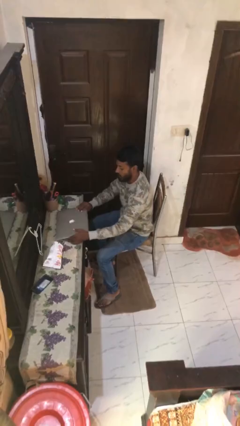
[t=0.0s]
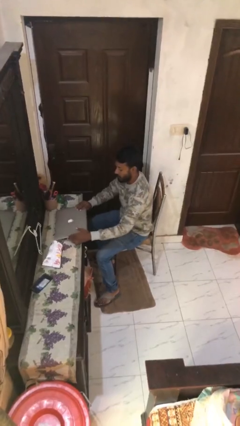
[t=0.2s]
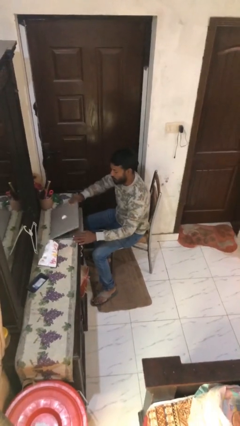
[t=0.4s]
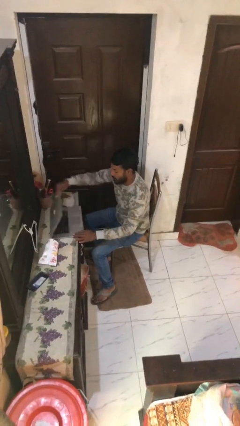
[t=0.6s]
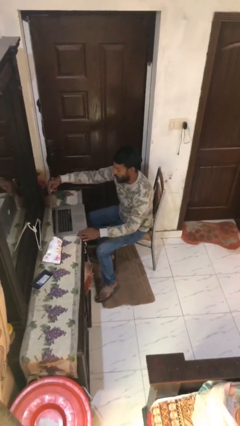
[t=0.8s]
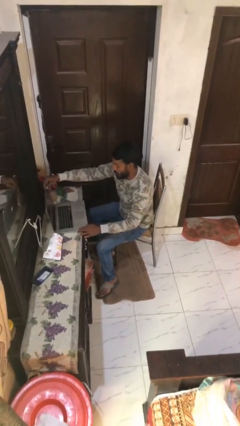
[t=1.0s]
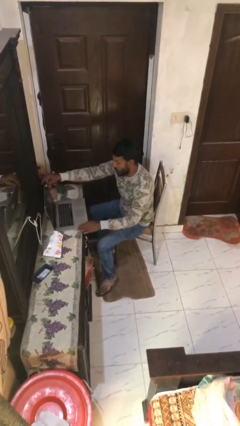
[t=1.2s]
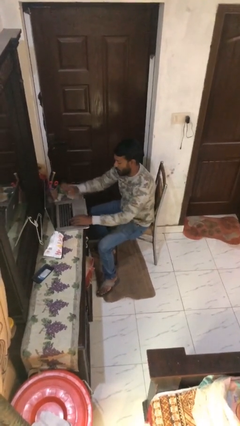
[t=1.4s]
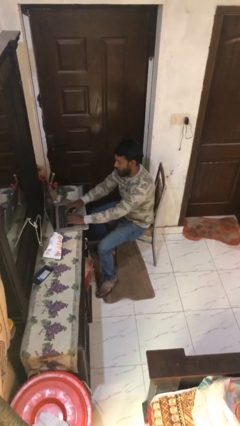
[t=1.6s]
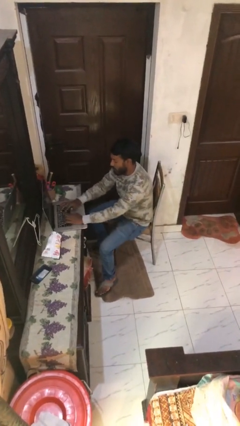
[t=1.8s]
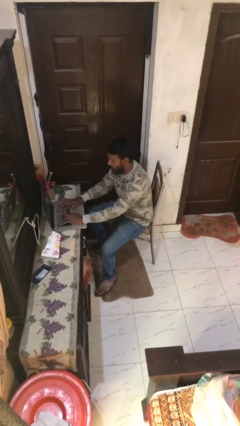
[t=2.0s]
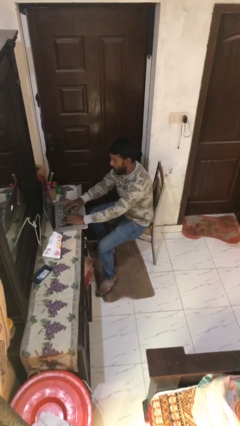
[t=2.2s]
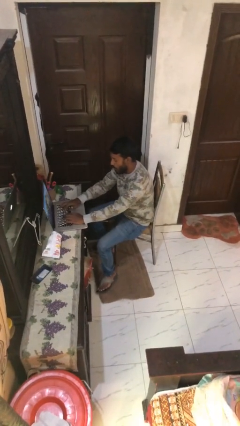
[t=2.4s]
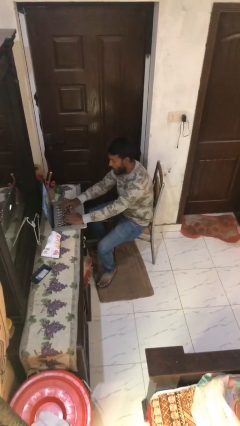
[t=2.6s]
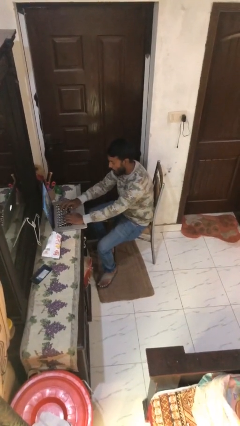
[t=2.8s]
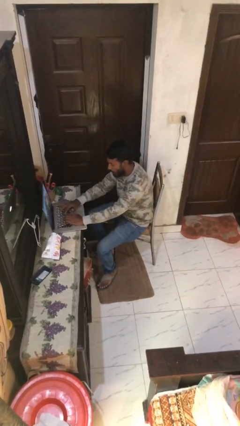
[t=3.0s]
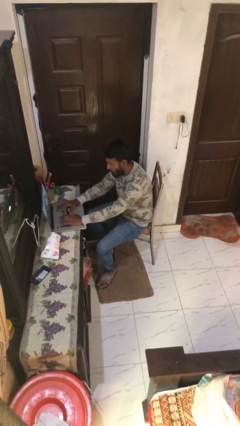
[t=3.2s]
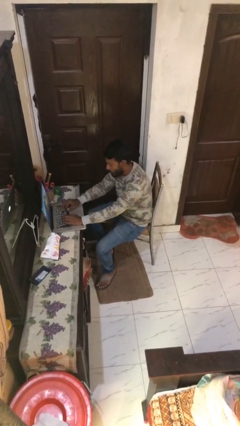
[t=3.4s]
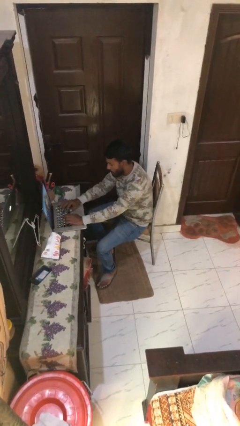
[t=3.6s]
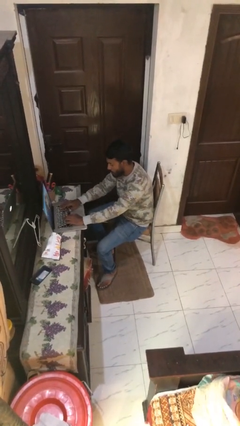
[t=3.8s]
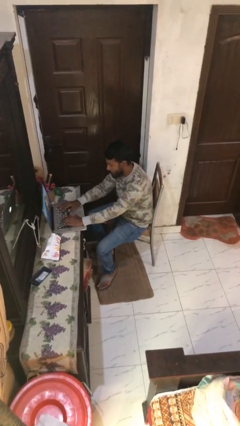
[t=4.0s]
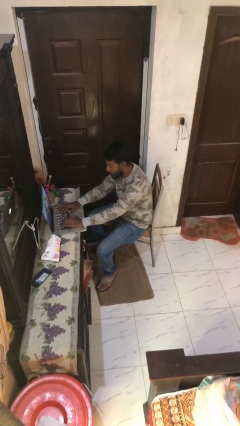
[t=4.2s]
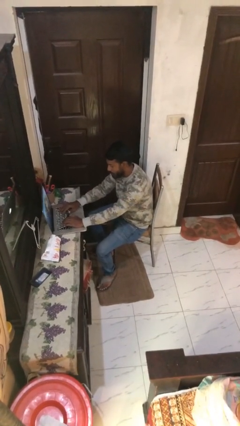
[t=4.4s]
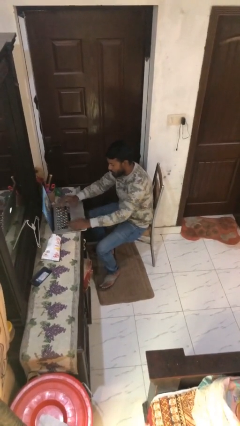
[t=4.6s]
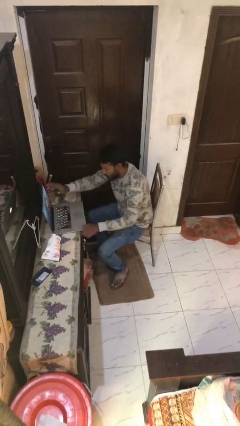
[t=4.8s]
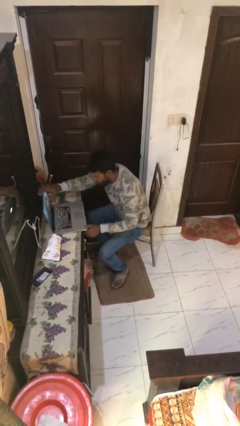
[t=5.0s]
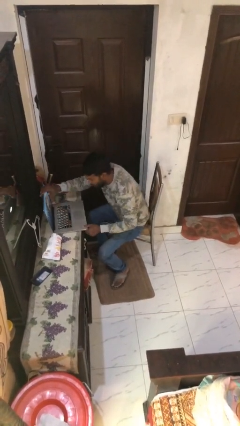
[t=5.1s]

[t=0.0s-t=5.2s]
person interacts with laptop

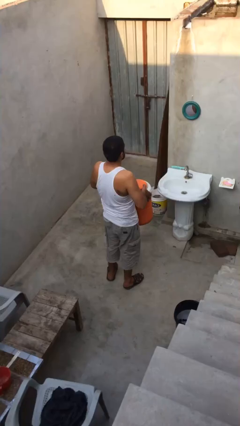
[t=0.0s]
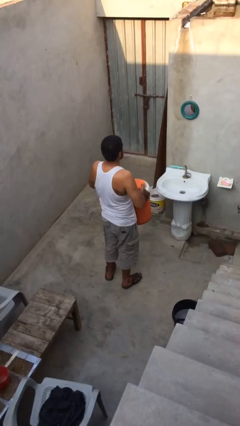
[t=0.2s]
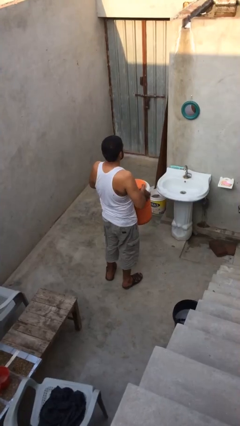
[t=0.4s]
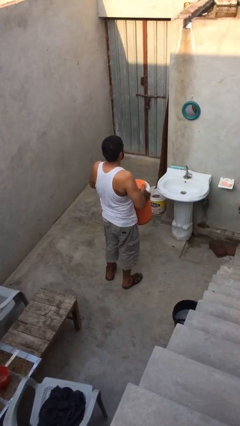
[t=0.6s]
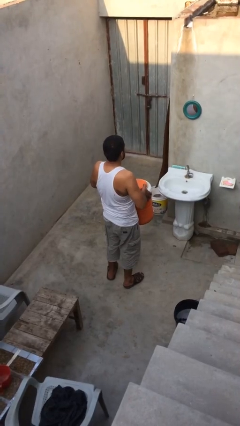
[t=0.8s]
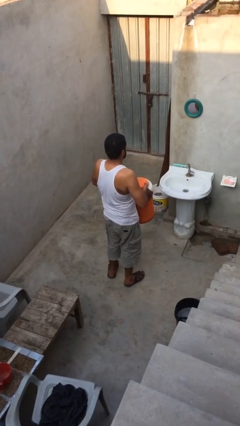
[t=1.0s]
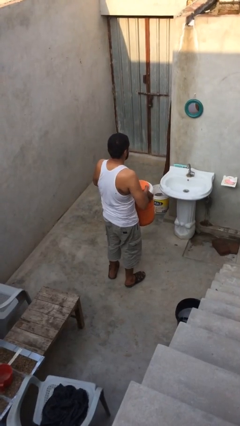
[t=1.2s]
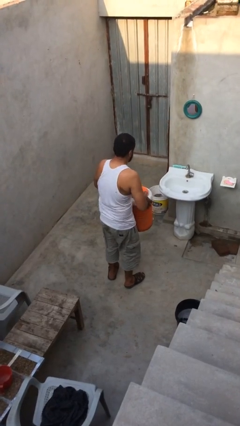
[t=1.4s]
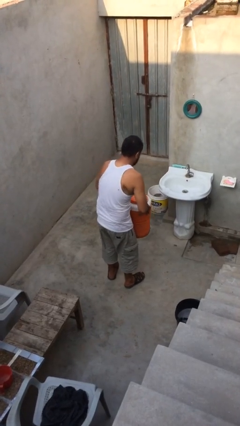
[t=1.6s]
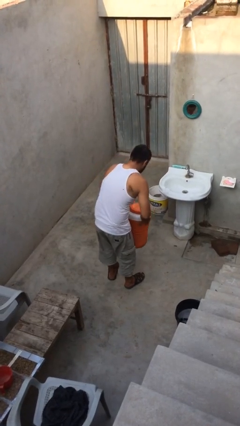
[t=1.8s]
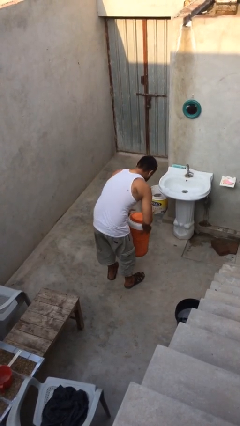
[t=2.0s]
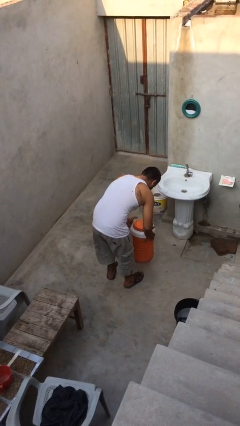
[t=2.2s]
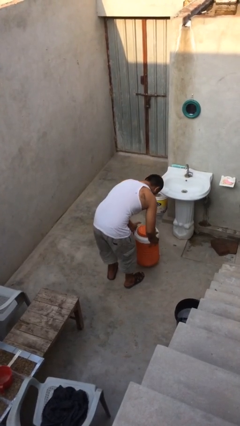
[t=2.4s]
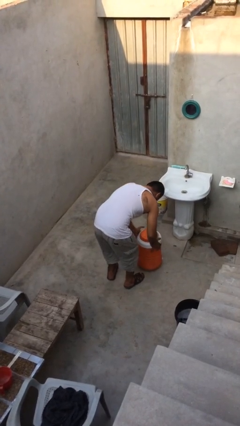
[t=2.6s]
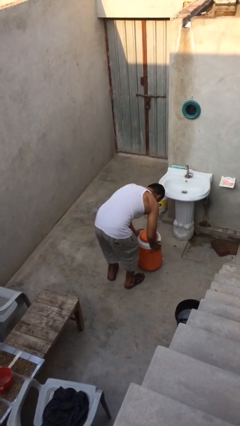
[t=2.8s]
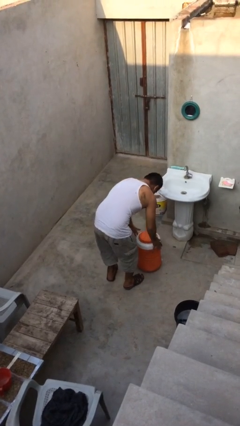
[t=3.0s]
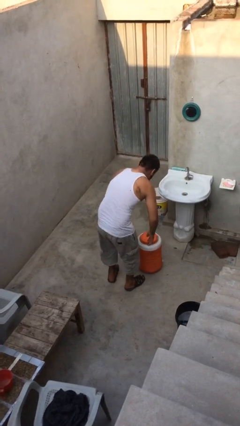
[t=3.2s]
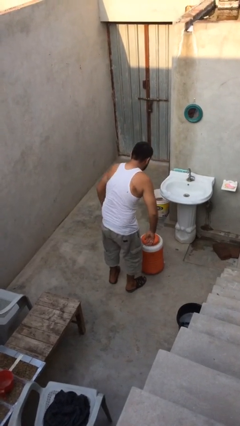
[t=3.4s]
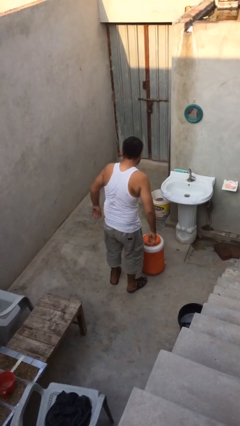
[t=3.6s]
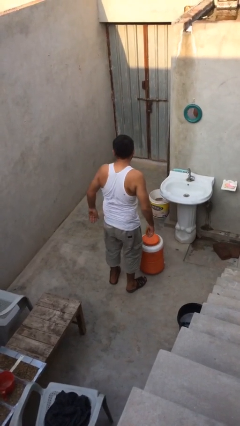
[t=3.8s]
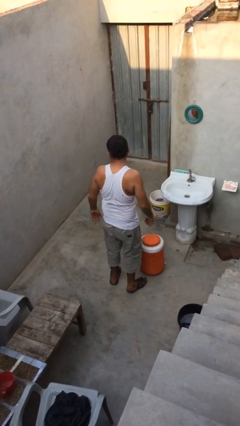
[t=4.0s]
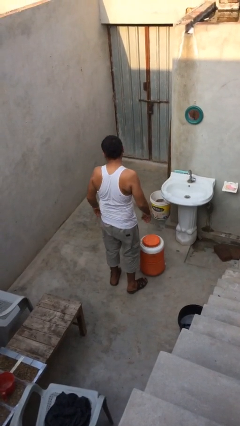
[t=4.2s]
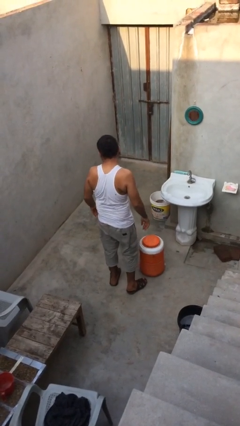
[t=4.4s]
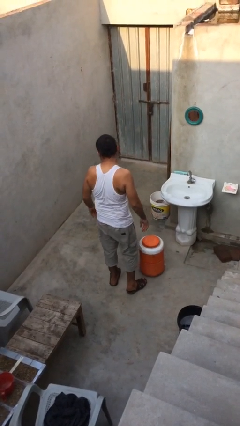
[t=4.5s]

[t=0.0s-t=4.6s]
person puts down object on floor

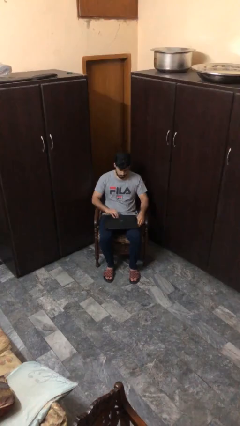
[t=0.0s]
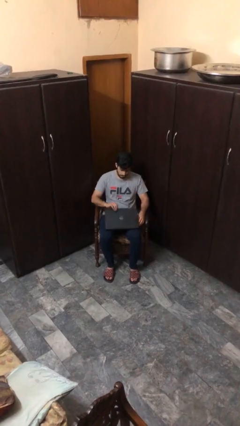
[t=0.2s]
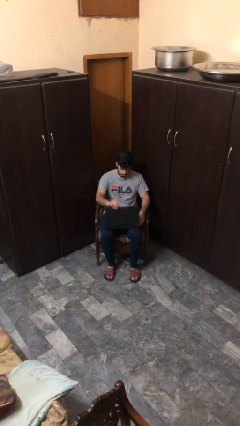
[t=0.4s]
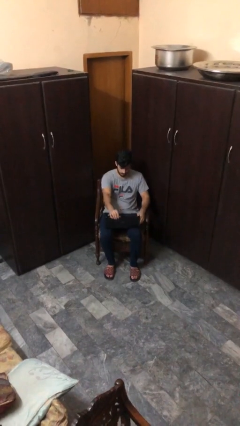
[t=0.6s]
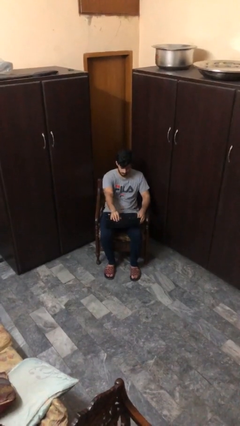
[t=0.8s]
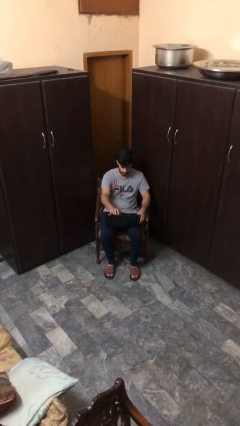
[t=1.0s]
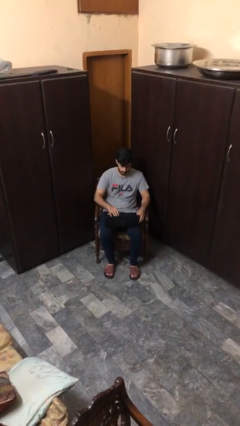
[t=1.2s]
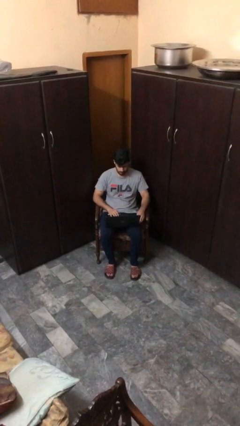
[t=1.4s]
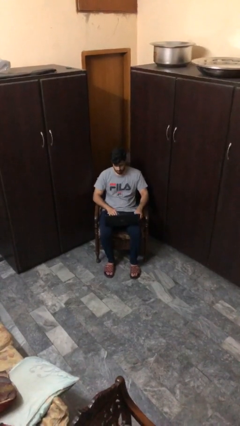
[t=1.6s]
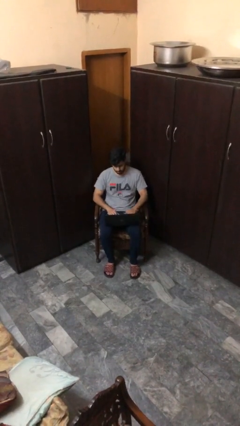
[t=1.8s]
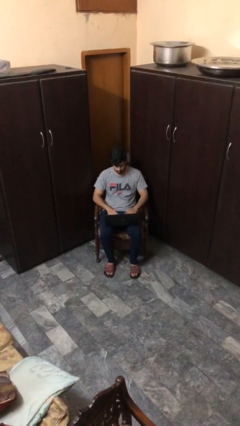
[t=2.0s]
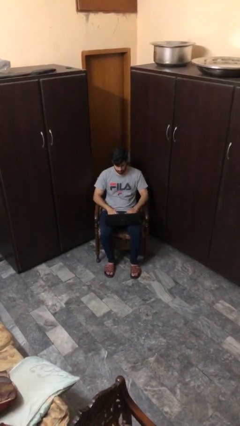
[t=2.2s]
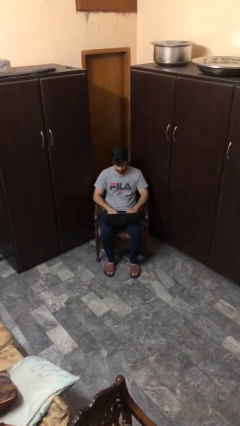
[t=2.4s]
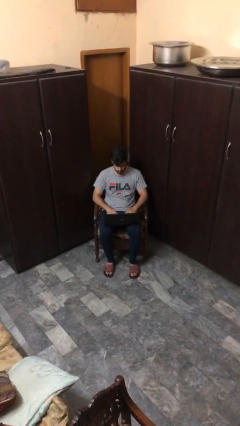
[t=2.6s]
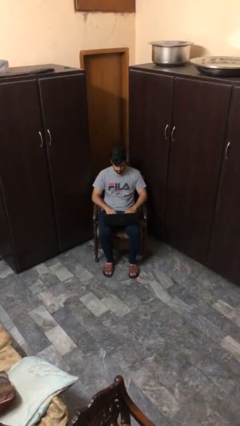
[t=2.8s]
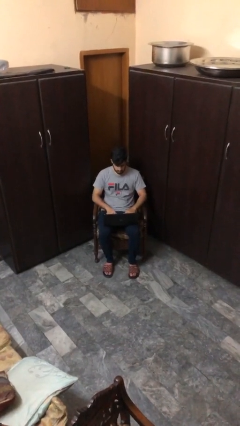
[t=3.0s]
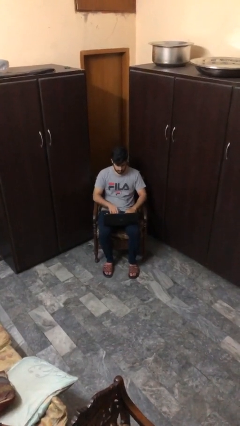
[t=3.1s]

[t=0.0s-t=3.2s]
person opens laptop

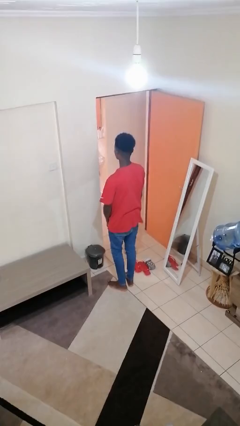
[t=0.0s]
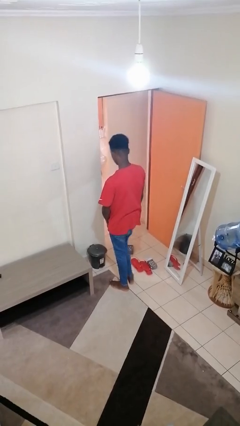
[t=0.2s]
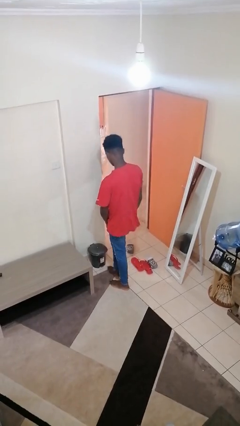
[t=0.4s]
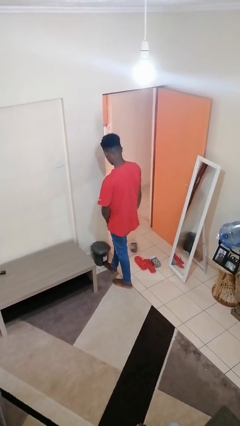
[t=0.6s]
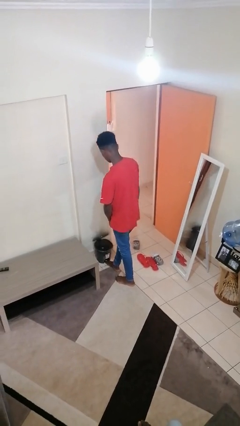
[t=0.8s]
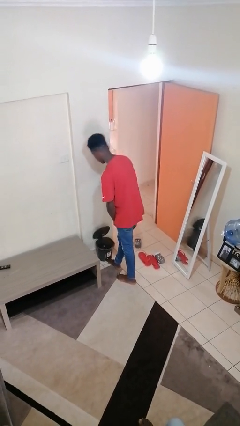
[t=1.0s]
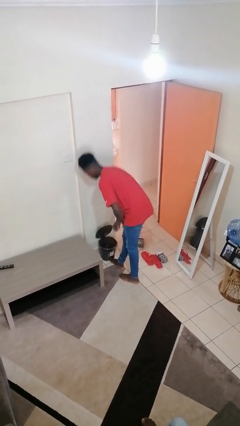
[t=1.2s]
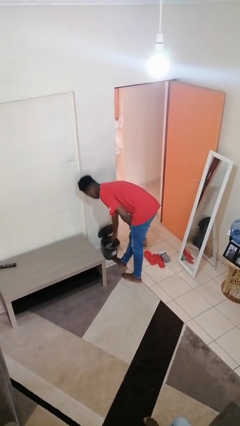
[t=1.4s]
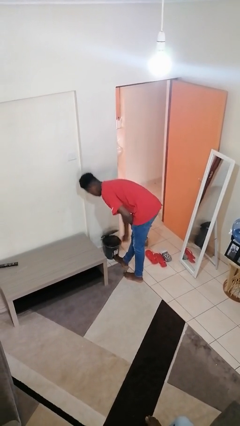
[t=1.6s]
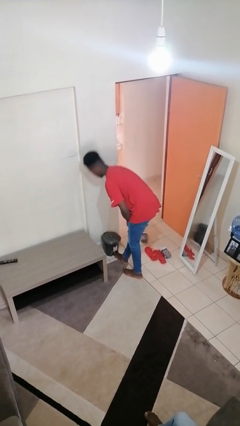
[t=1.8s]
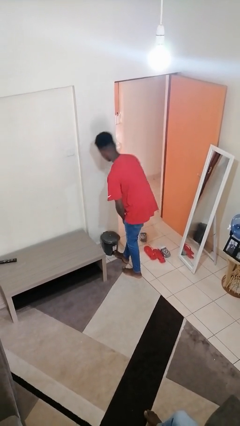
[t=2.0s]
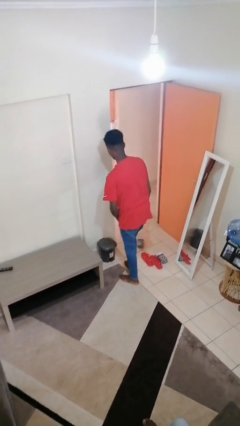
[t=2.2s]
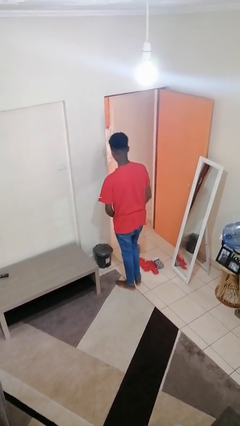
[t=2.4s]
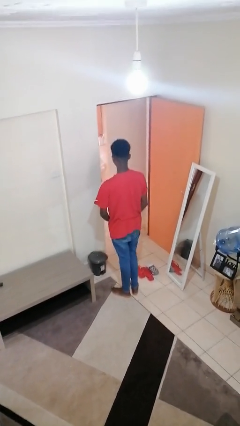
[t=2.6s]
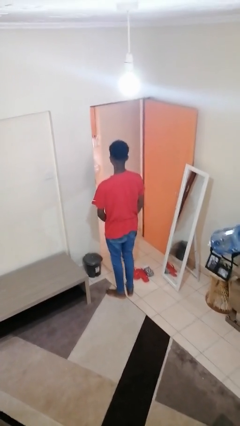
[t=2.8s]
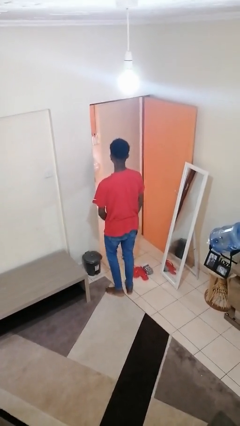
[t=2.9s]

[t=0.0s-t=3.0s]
person discards trash

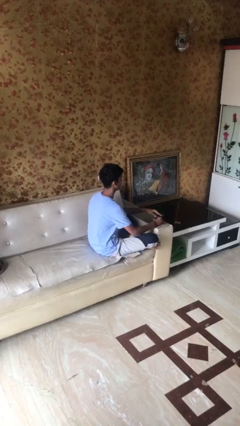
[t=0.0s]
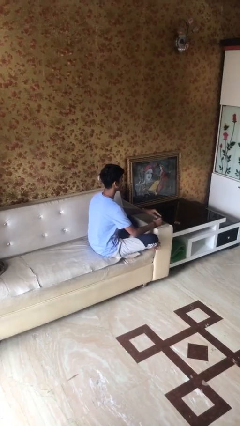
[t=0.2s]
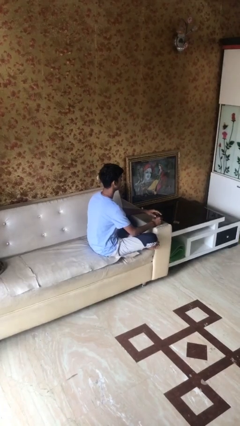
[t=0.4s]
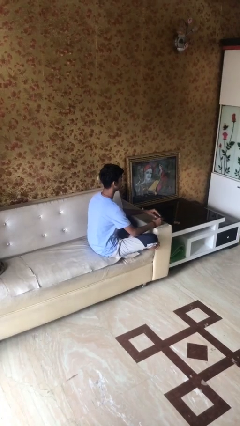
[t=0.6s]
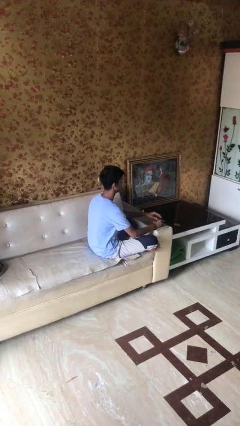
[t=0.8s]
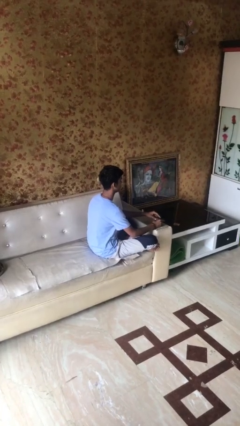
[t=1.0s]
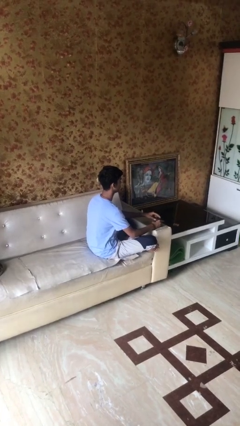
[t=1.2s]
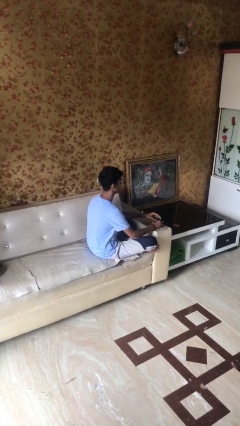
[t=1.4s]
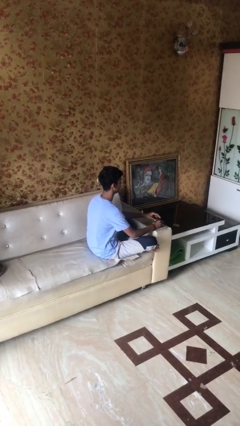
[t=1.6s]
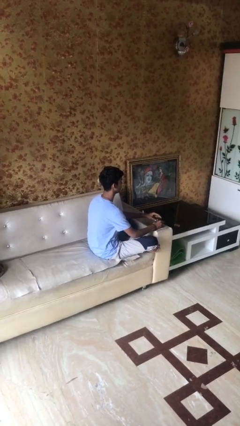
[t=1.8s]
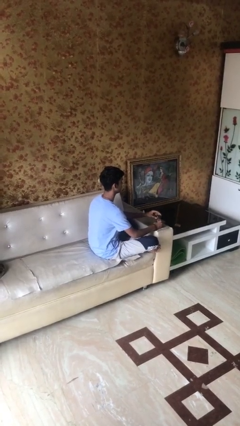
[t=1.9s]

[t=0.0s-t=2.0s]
person opens jar
